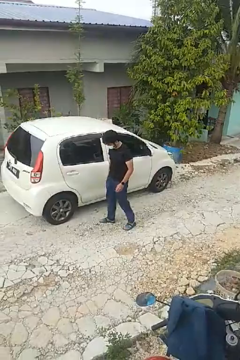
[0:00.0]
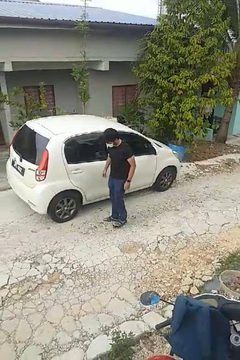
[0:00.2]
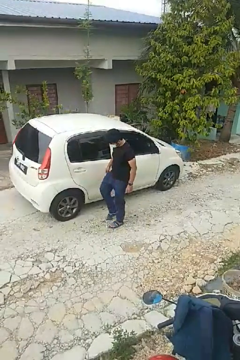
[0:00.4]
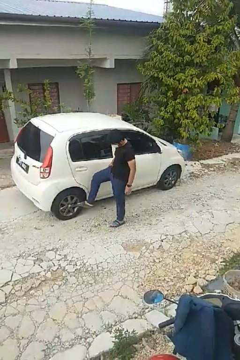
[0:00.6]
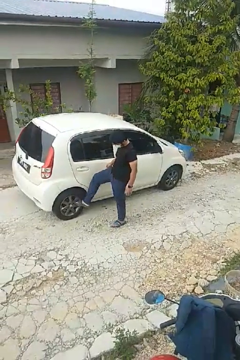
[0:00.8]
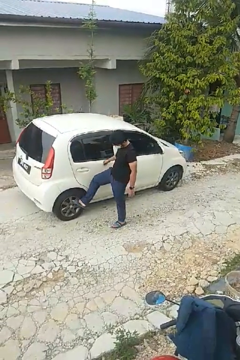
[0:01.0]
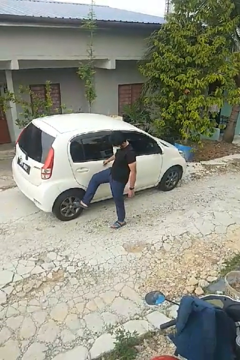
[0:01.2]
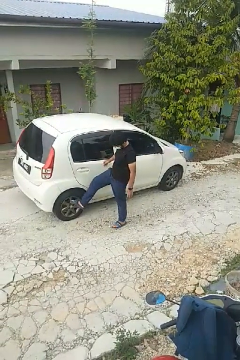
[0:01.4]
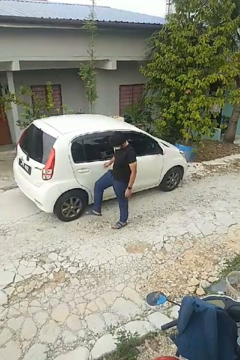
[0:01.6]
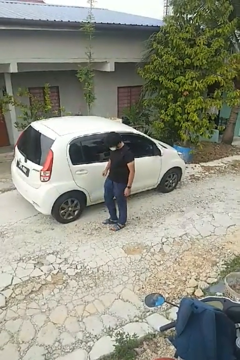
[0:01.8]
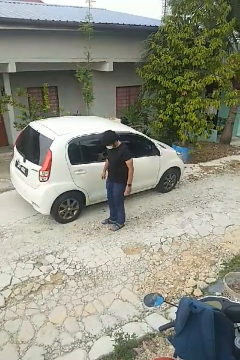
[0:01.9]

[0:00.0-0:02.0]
person kicks car tires

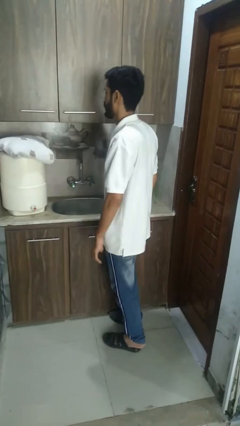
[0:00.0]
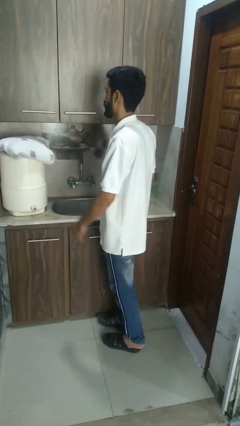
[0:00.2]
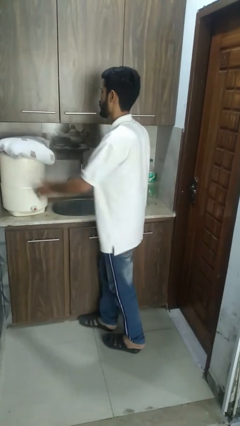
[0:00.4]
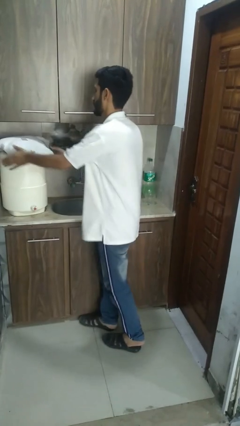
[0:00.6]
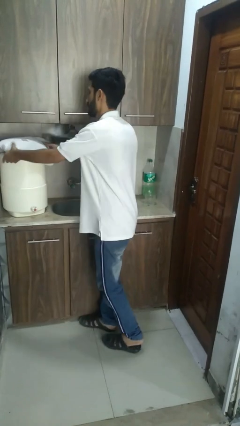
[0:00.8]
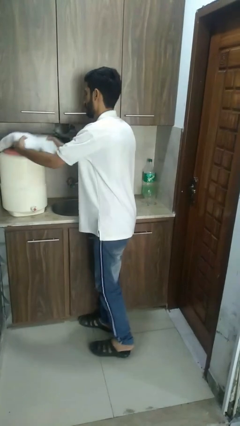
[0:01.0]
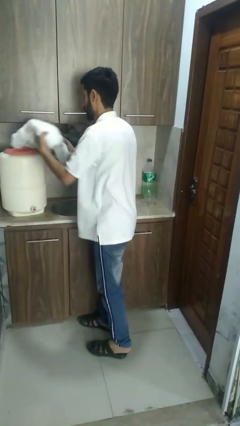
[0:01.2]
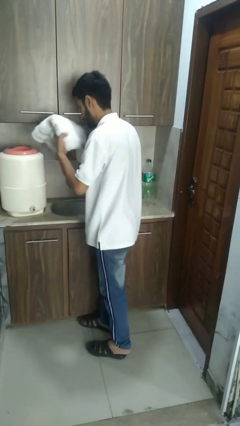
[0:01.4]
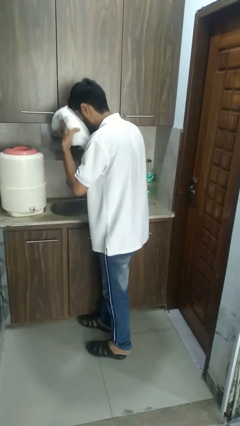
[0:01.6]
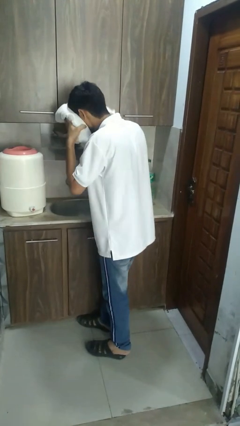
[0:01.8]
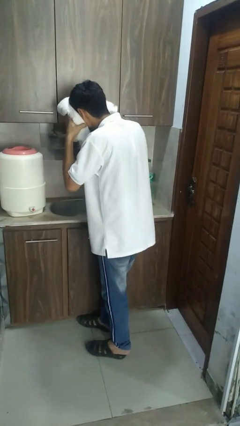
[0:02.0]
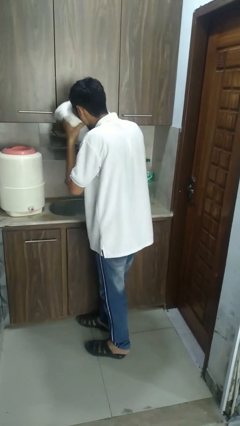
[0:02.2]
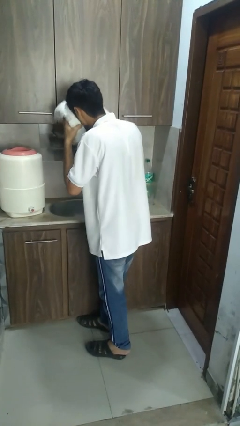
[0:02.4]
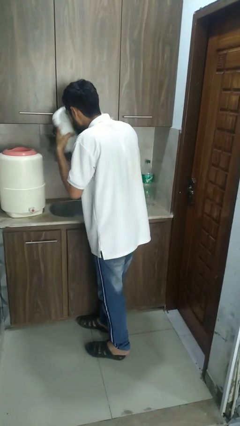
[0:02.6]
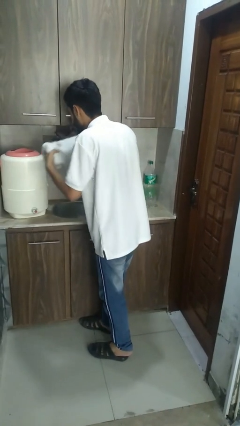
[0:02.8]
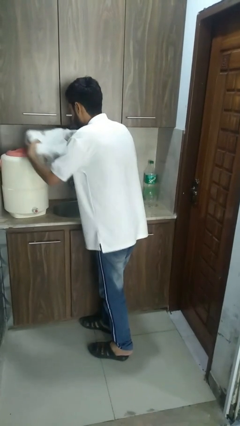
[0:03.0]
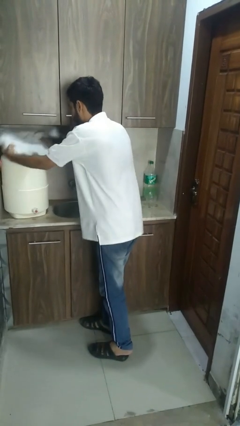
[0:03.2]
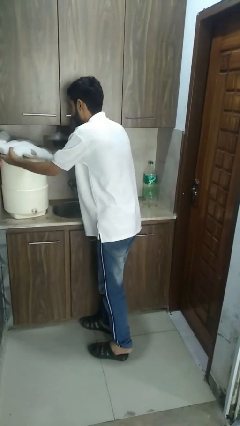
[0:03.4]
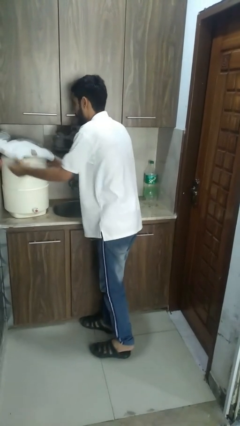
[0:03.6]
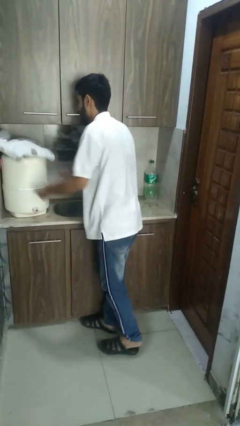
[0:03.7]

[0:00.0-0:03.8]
person dries face with towel

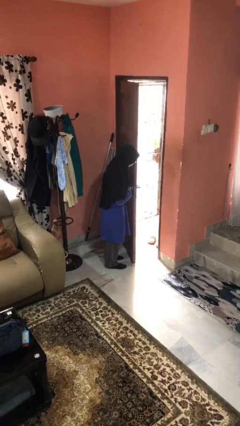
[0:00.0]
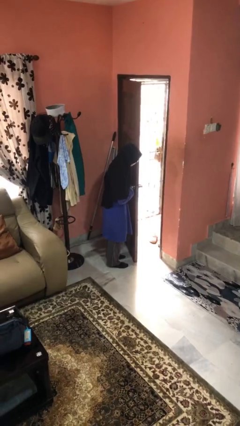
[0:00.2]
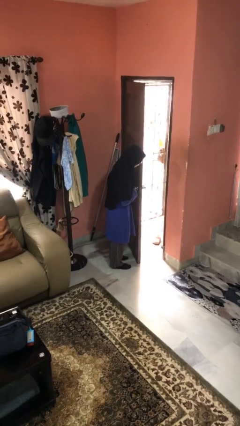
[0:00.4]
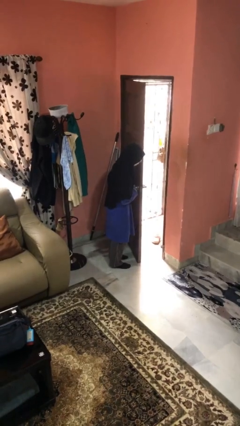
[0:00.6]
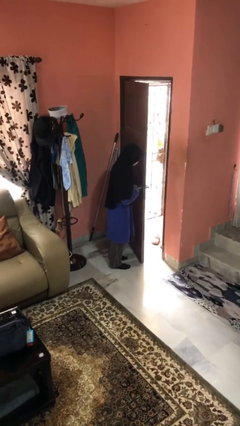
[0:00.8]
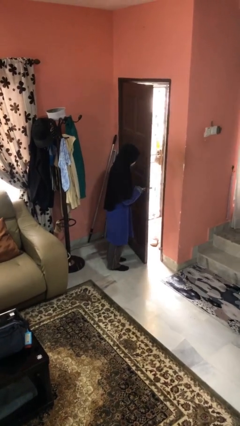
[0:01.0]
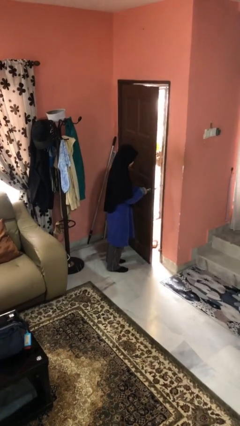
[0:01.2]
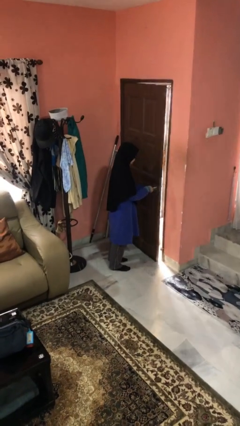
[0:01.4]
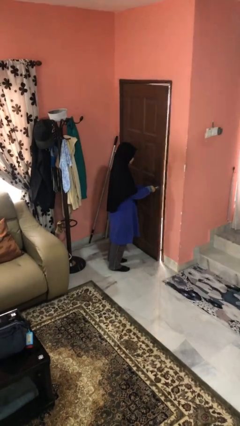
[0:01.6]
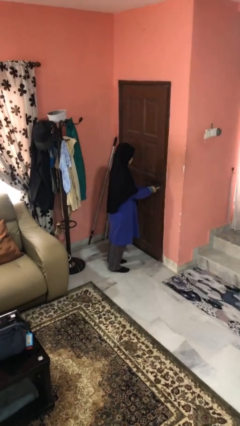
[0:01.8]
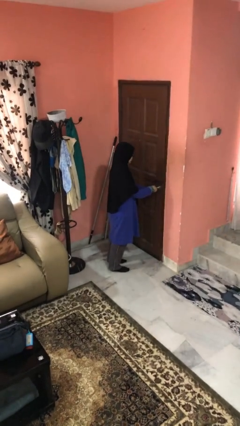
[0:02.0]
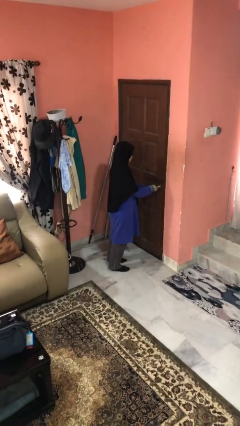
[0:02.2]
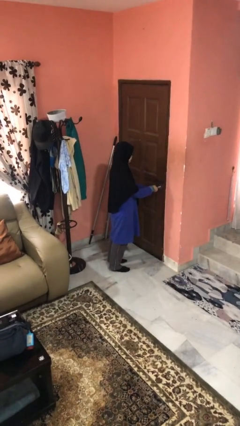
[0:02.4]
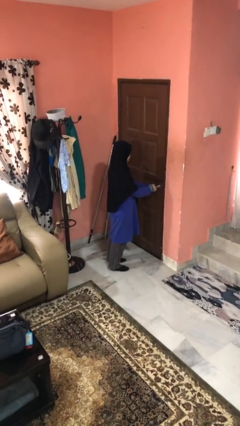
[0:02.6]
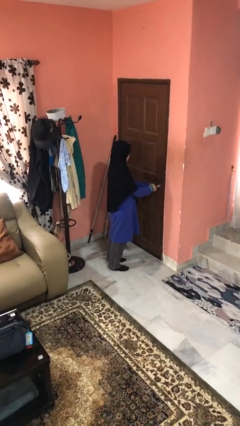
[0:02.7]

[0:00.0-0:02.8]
person closes facility door

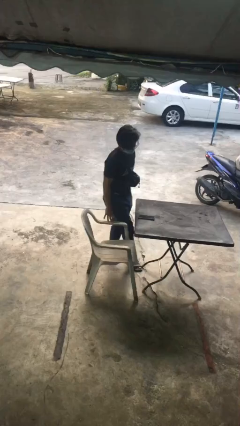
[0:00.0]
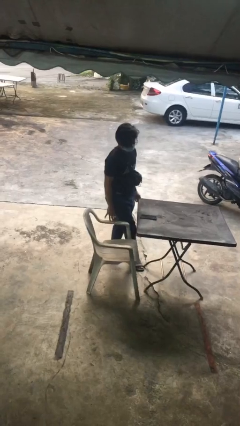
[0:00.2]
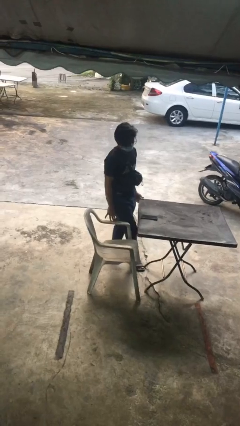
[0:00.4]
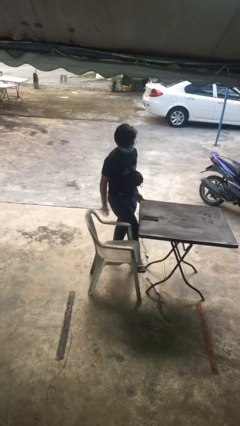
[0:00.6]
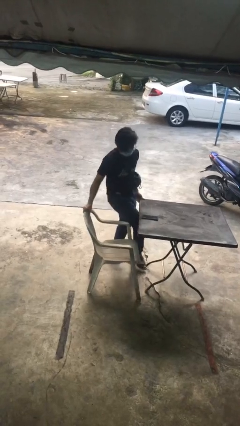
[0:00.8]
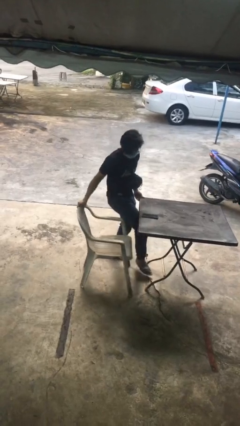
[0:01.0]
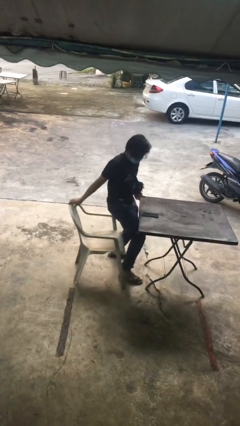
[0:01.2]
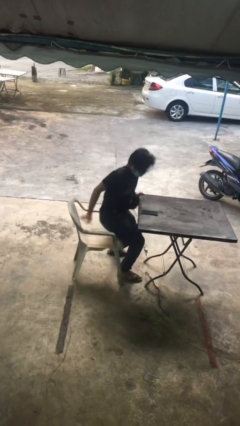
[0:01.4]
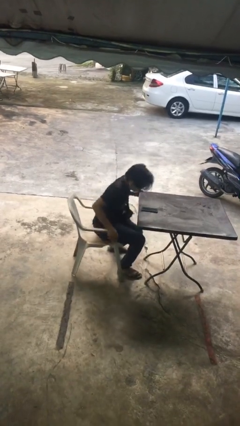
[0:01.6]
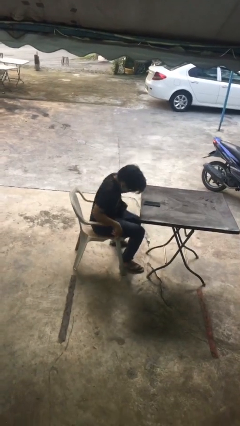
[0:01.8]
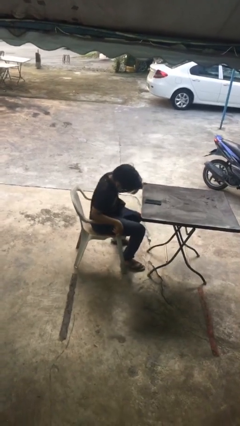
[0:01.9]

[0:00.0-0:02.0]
person sits down

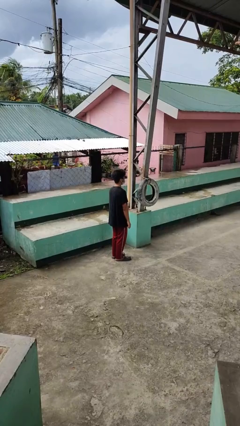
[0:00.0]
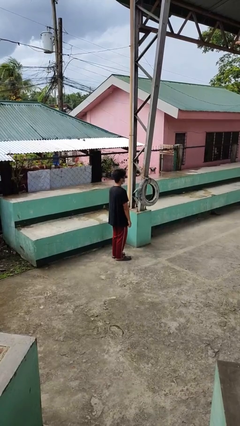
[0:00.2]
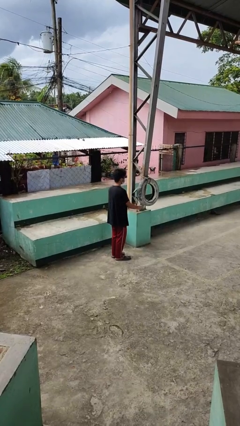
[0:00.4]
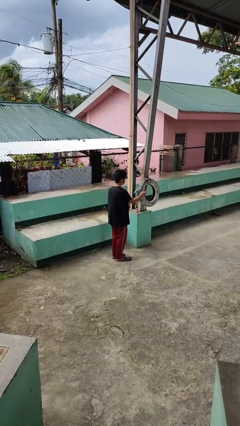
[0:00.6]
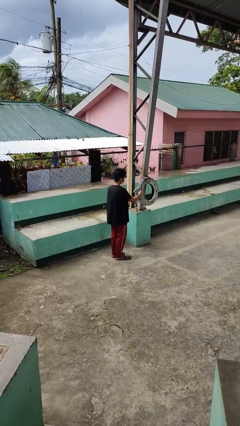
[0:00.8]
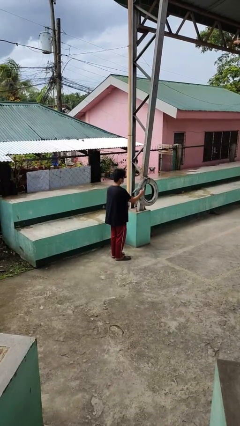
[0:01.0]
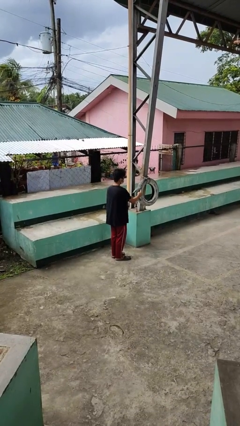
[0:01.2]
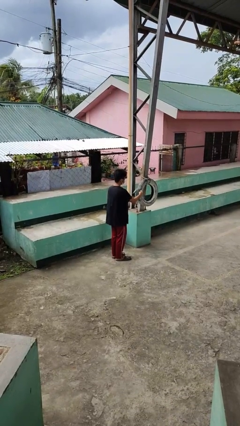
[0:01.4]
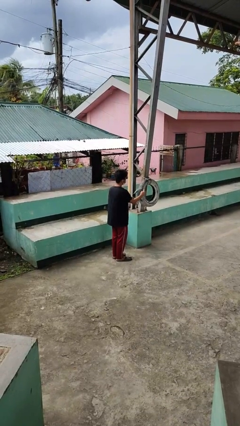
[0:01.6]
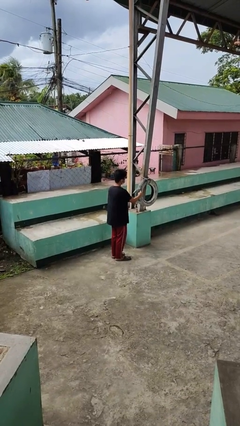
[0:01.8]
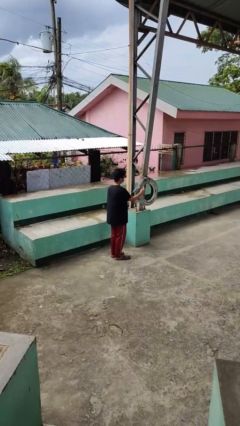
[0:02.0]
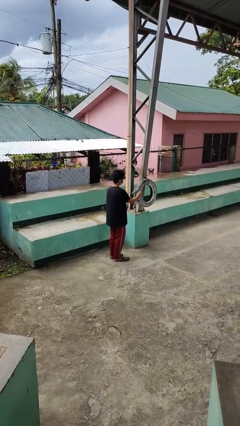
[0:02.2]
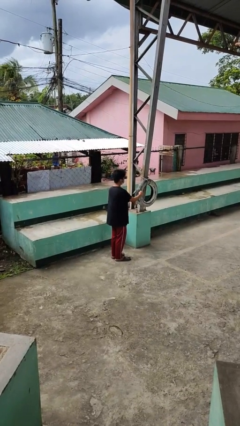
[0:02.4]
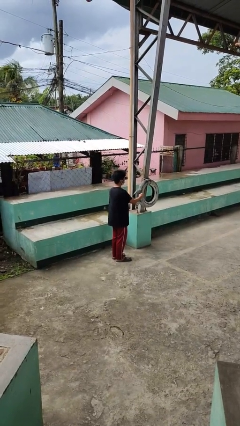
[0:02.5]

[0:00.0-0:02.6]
person taps object with finger

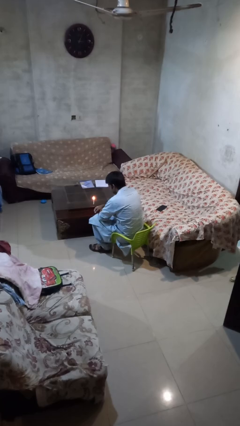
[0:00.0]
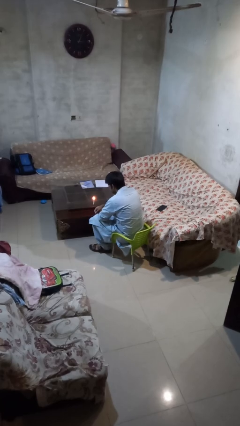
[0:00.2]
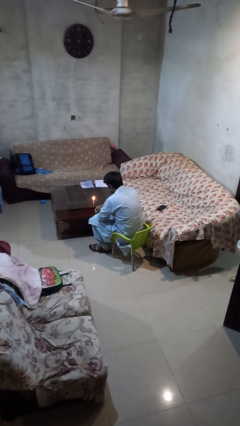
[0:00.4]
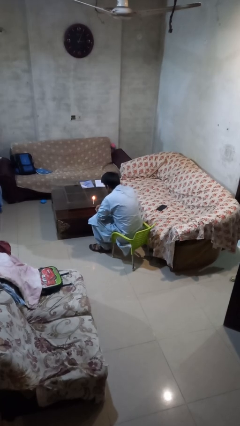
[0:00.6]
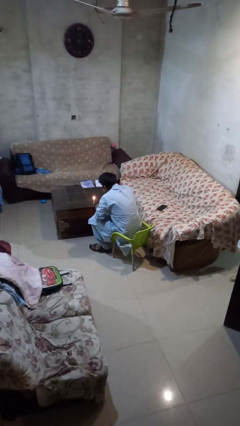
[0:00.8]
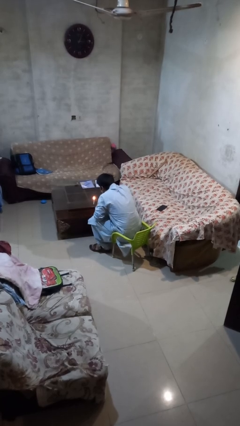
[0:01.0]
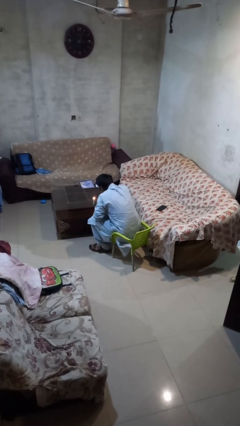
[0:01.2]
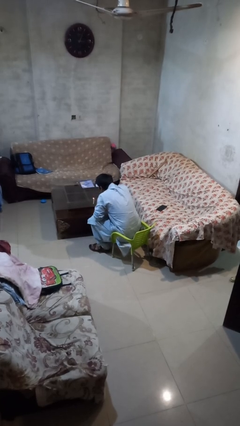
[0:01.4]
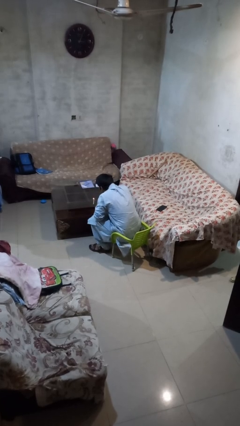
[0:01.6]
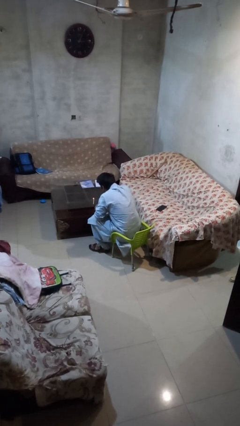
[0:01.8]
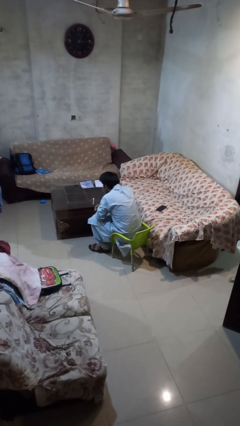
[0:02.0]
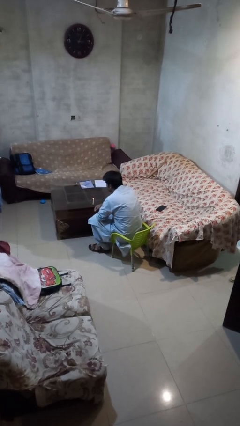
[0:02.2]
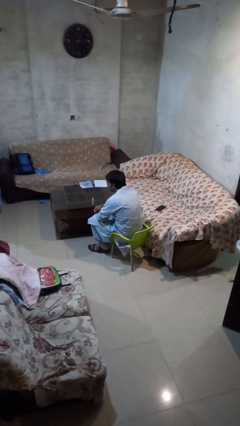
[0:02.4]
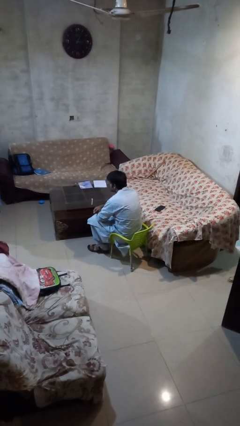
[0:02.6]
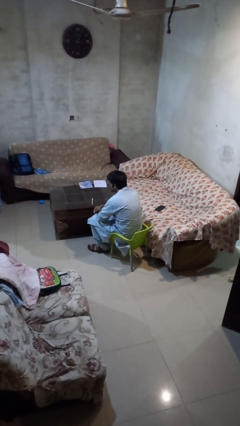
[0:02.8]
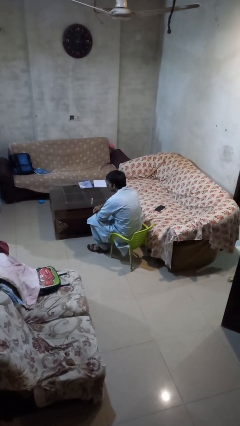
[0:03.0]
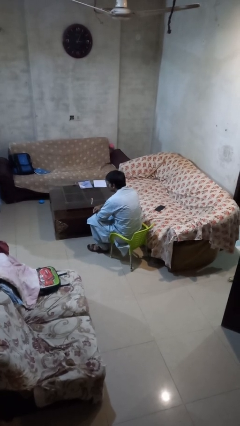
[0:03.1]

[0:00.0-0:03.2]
person extinguishes candle

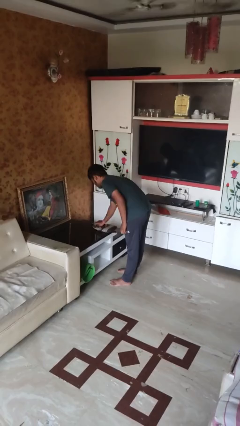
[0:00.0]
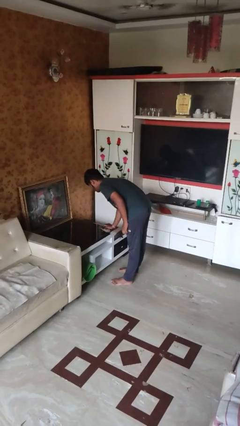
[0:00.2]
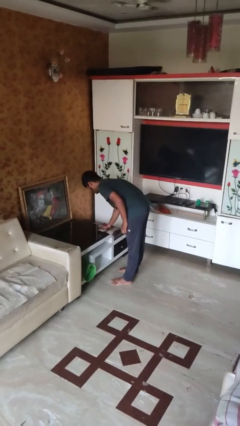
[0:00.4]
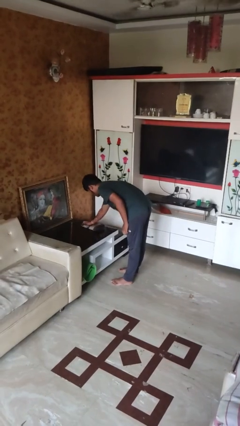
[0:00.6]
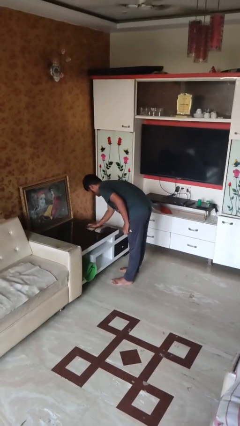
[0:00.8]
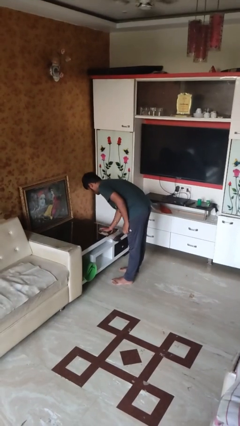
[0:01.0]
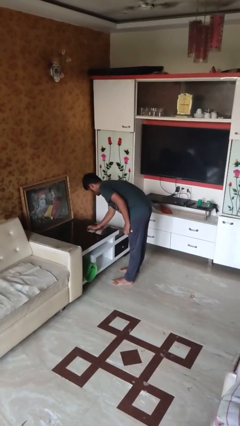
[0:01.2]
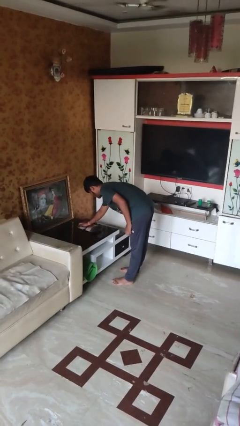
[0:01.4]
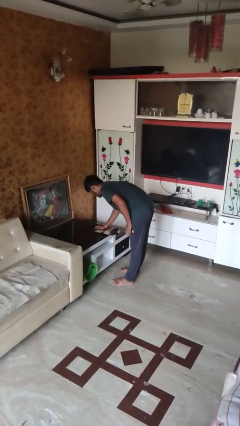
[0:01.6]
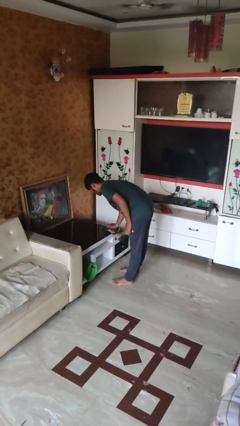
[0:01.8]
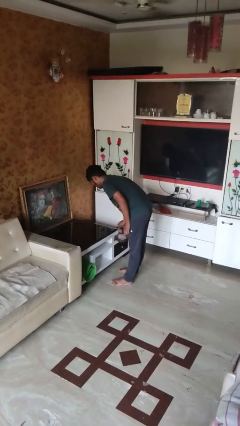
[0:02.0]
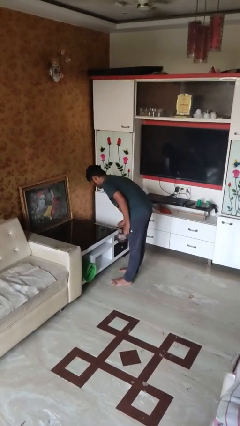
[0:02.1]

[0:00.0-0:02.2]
person cleans table with rag
